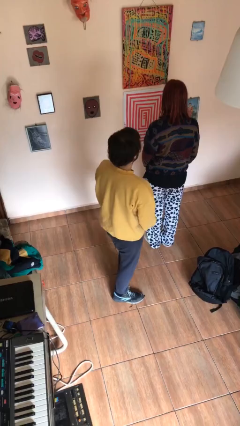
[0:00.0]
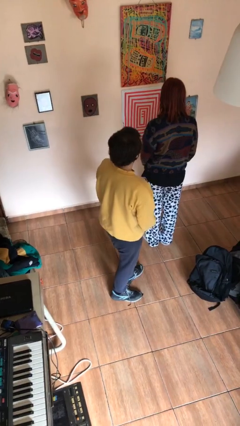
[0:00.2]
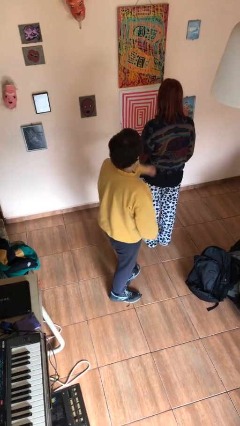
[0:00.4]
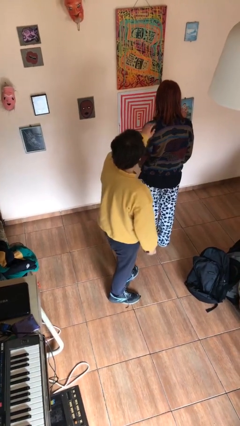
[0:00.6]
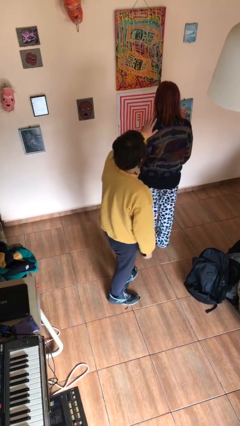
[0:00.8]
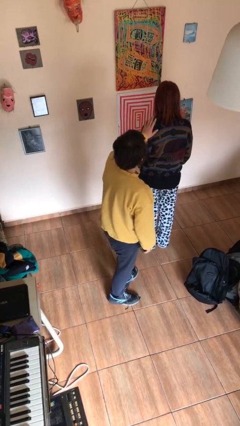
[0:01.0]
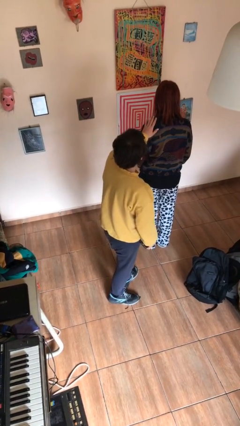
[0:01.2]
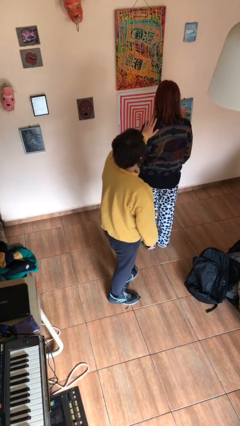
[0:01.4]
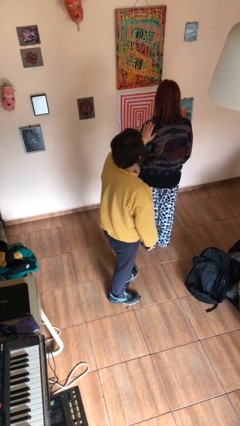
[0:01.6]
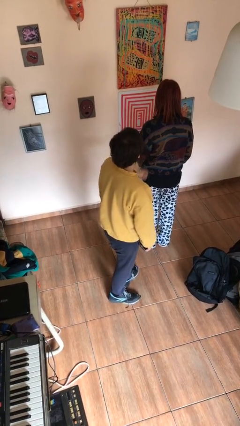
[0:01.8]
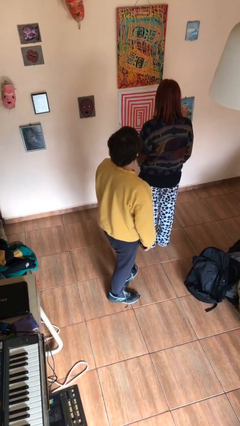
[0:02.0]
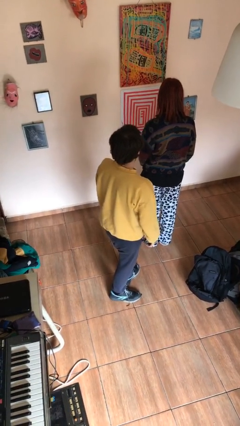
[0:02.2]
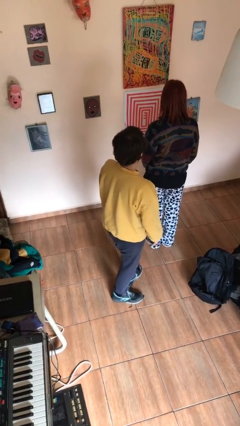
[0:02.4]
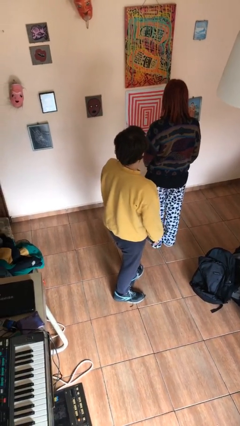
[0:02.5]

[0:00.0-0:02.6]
person touches back of person

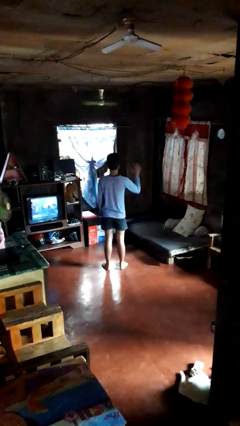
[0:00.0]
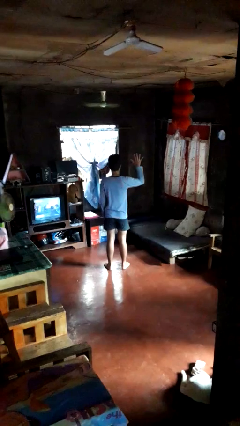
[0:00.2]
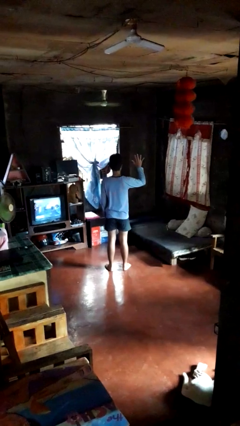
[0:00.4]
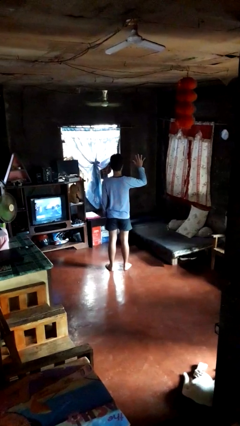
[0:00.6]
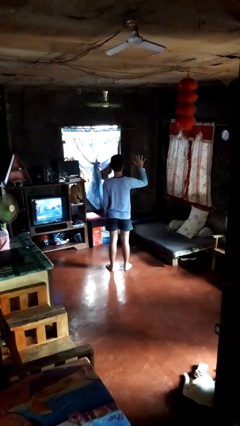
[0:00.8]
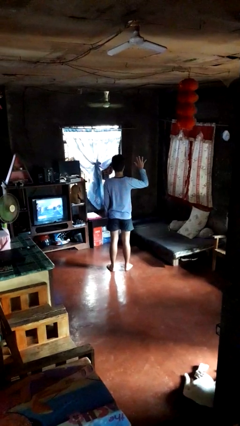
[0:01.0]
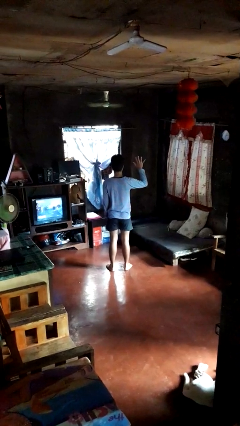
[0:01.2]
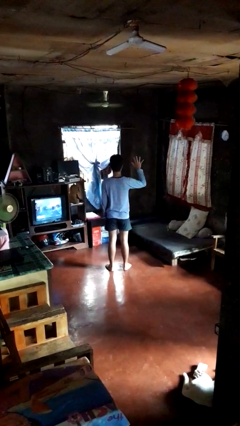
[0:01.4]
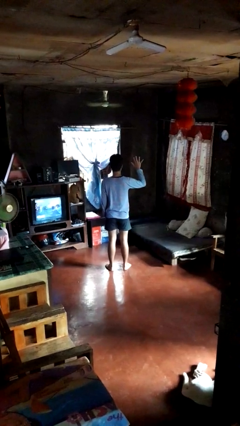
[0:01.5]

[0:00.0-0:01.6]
person gestures number five

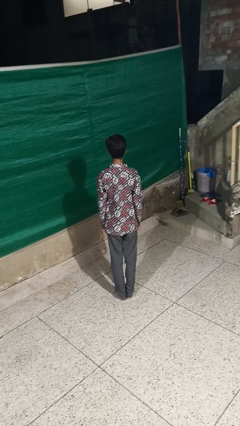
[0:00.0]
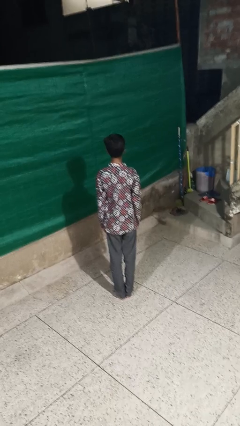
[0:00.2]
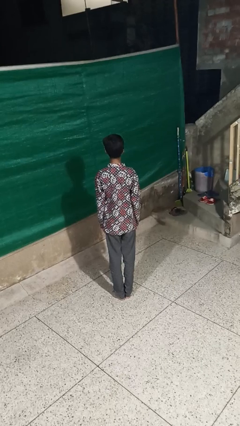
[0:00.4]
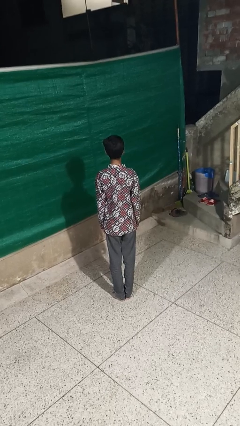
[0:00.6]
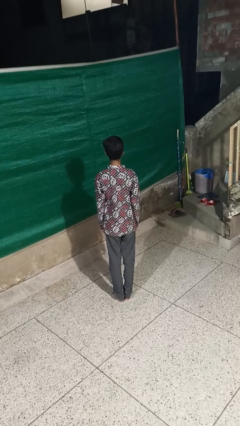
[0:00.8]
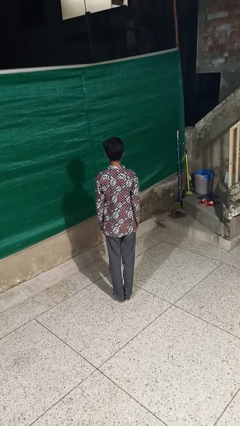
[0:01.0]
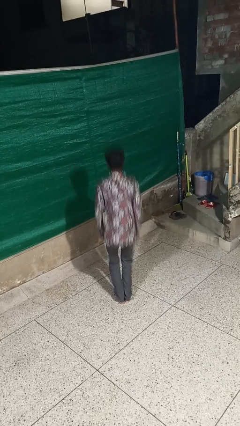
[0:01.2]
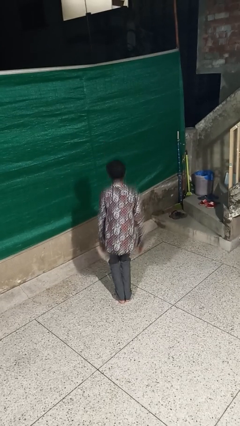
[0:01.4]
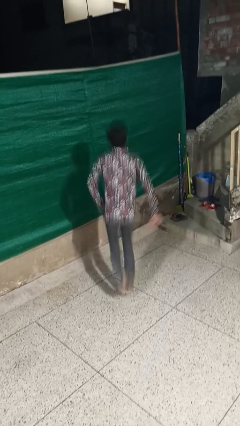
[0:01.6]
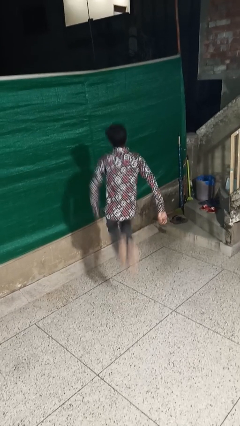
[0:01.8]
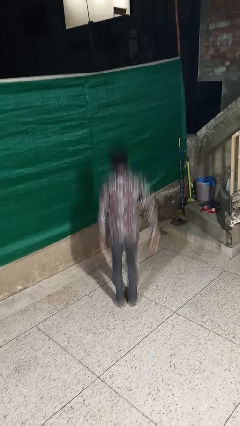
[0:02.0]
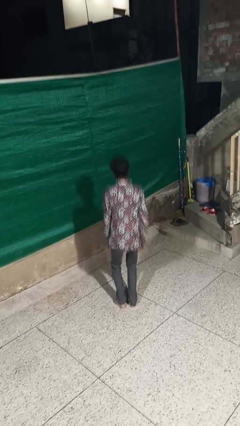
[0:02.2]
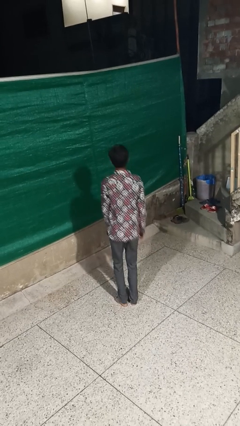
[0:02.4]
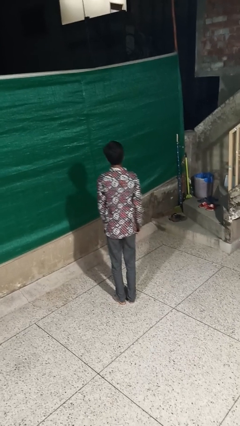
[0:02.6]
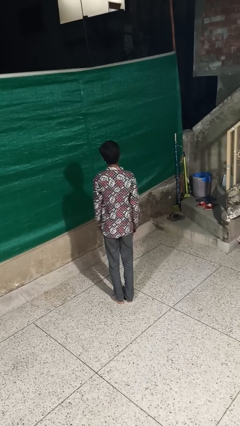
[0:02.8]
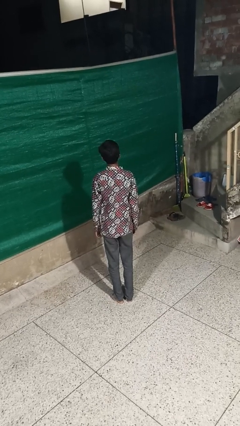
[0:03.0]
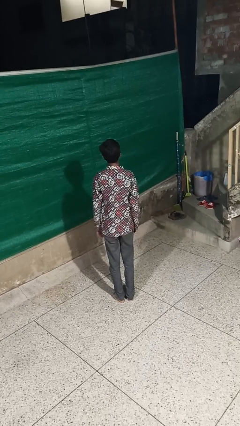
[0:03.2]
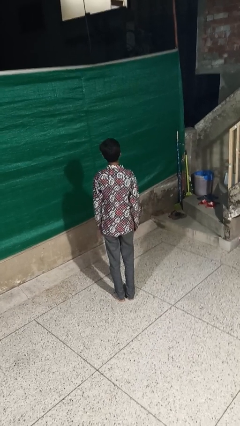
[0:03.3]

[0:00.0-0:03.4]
person jumps

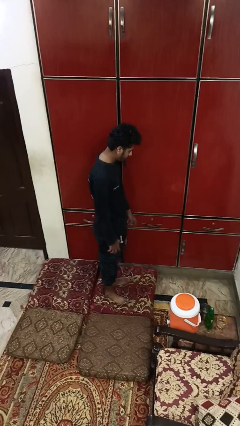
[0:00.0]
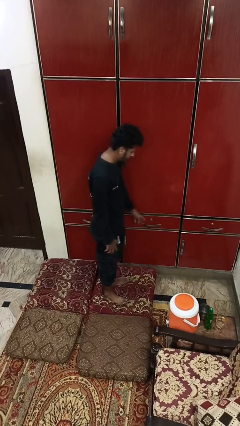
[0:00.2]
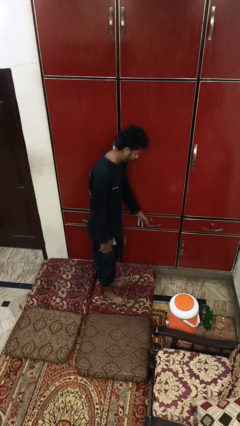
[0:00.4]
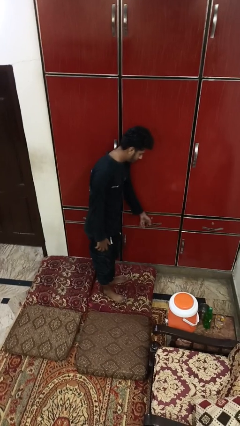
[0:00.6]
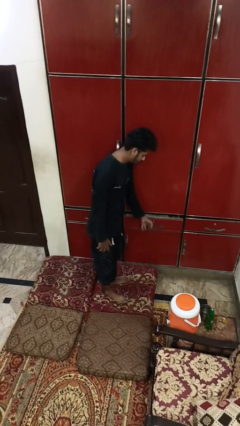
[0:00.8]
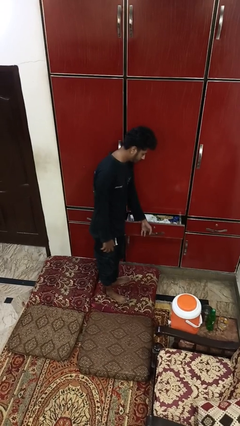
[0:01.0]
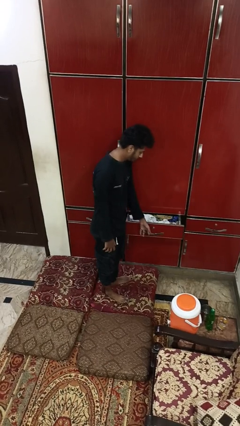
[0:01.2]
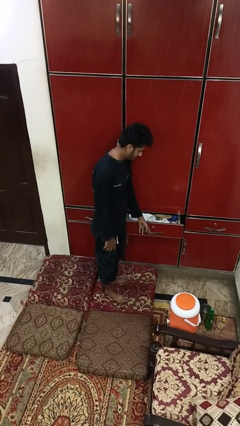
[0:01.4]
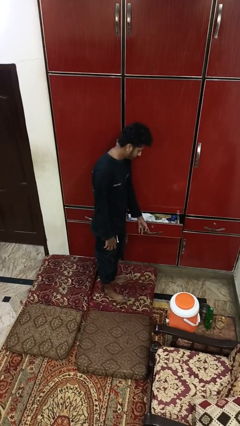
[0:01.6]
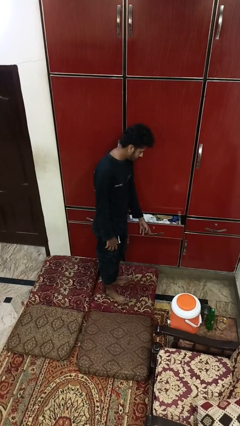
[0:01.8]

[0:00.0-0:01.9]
person opens dresser drawer

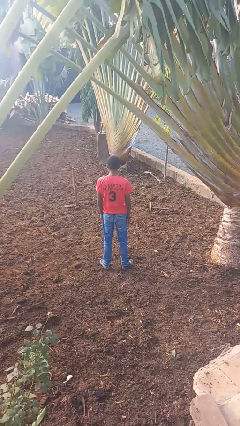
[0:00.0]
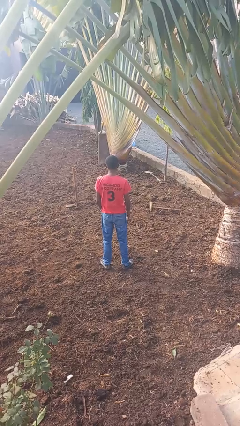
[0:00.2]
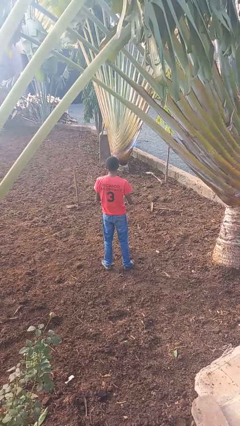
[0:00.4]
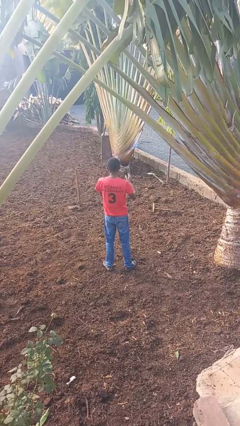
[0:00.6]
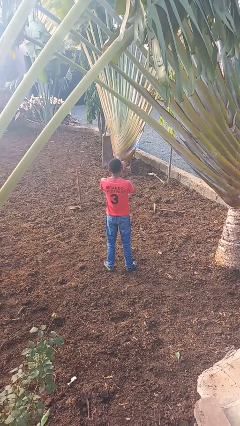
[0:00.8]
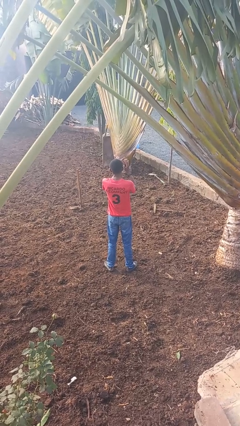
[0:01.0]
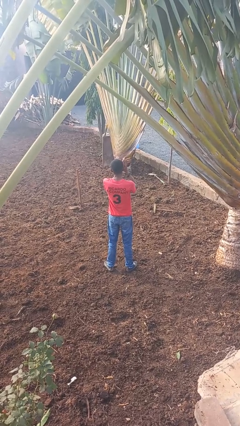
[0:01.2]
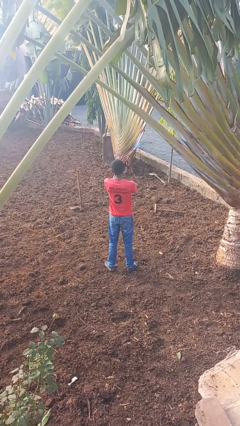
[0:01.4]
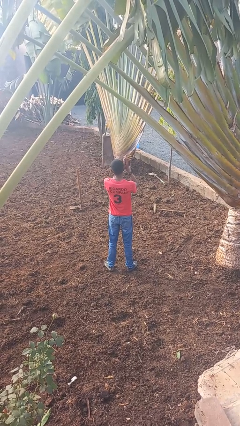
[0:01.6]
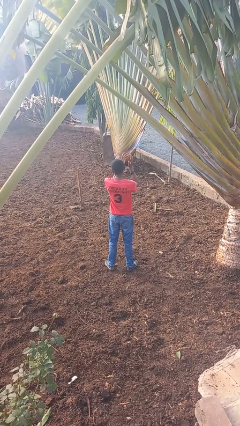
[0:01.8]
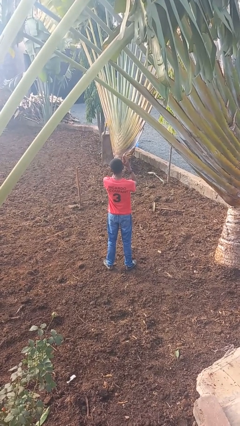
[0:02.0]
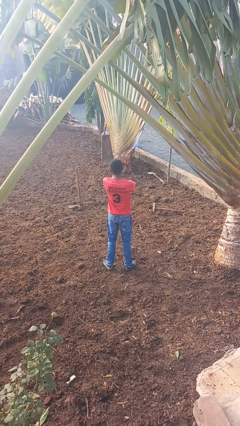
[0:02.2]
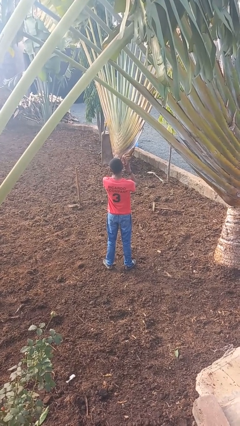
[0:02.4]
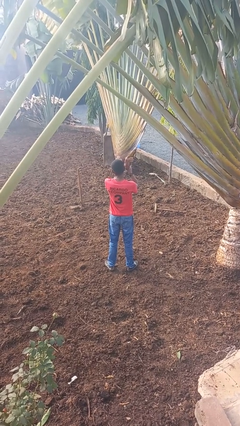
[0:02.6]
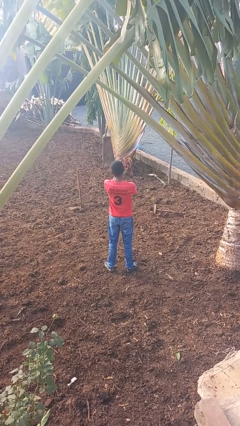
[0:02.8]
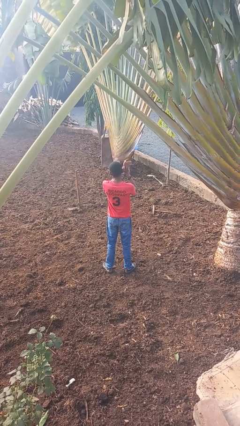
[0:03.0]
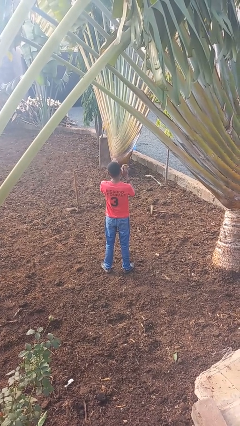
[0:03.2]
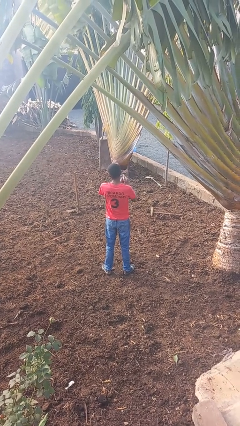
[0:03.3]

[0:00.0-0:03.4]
person claps hands

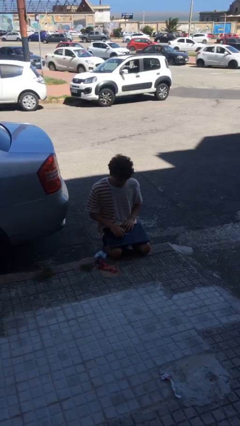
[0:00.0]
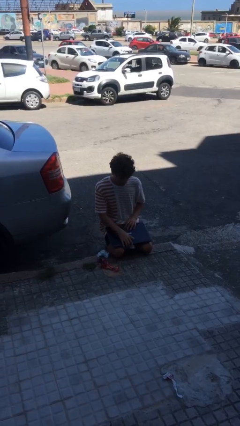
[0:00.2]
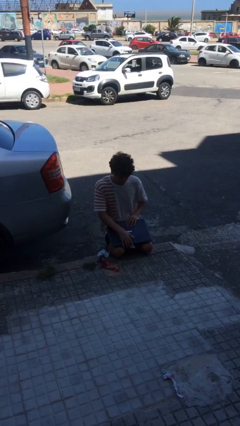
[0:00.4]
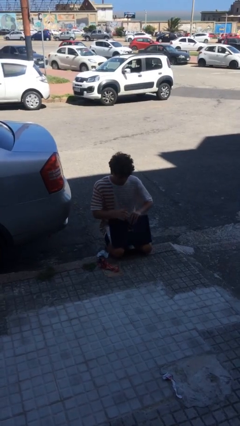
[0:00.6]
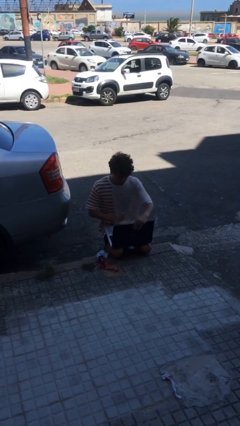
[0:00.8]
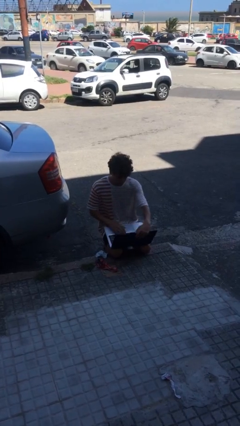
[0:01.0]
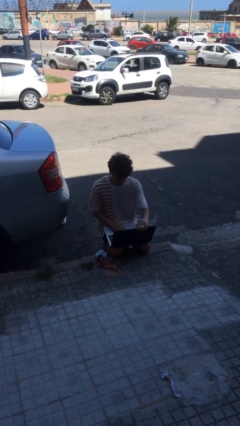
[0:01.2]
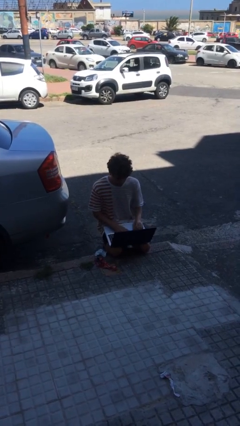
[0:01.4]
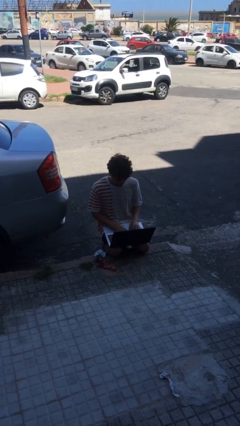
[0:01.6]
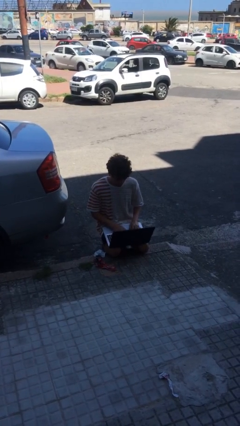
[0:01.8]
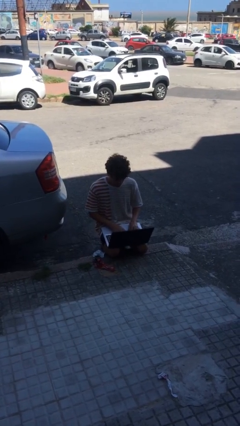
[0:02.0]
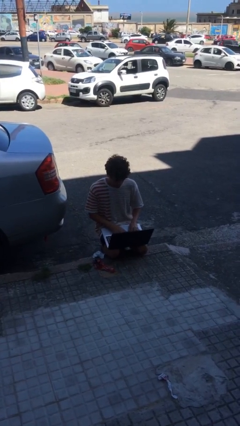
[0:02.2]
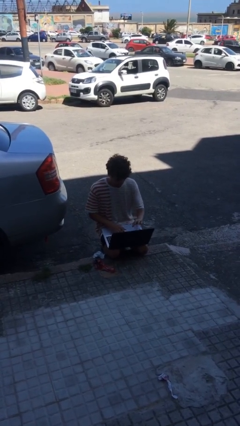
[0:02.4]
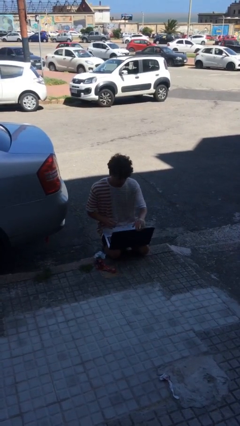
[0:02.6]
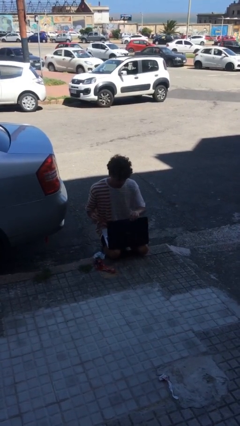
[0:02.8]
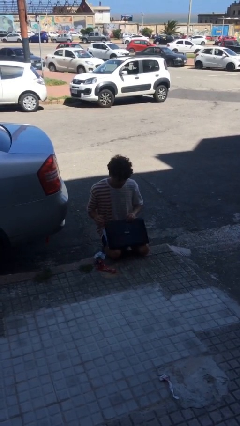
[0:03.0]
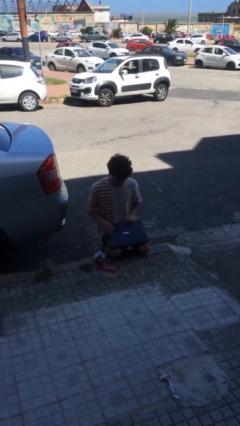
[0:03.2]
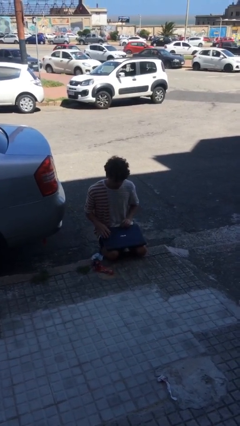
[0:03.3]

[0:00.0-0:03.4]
person interacts with laptop

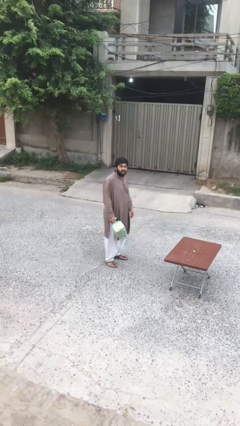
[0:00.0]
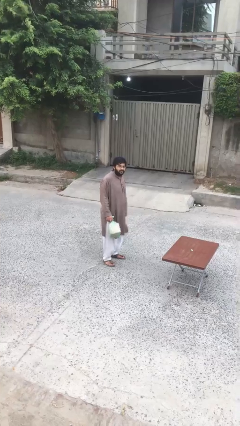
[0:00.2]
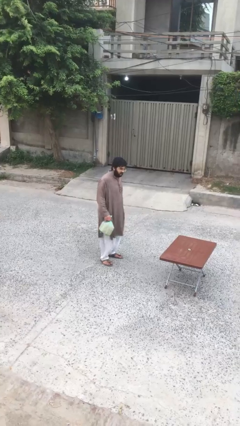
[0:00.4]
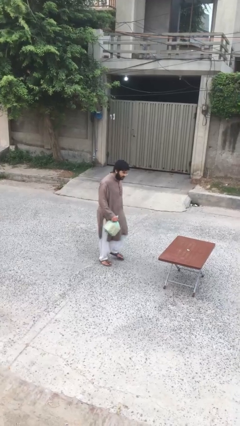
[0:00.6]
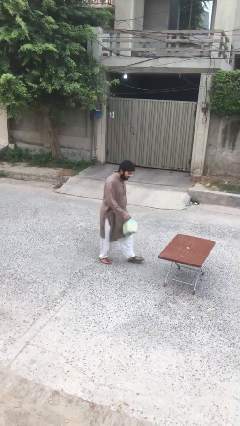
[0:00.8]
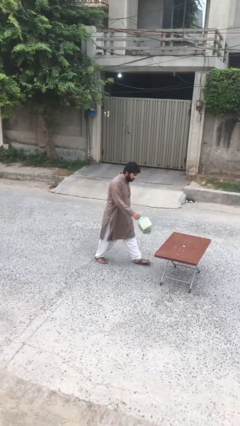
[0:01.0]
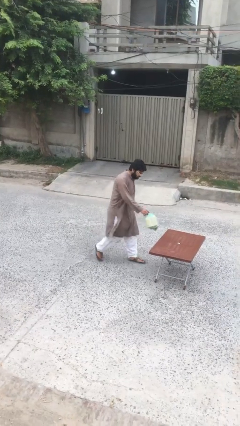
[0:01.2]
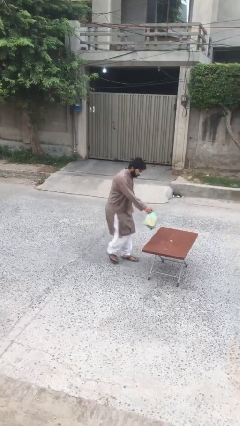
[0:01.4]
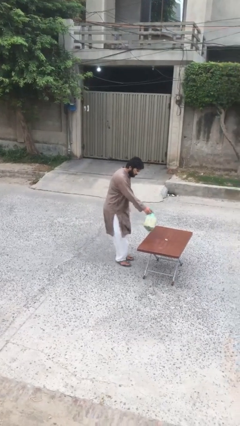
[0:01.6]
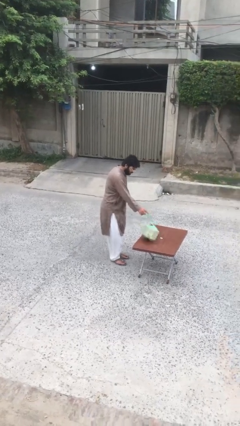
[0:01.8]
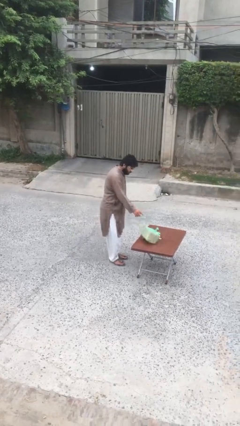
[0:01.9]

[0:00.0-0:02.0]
person puts down object on table
